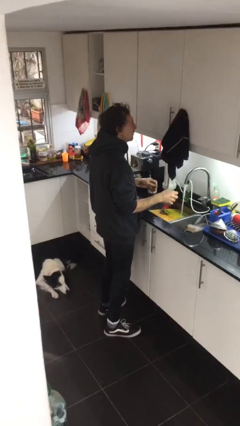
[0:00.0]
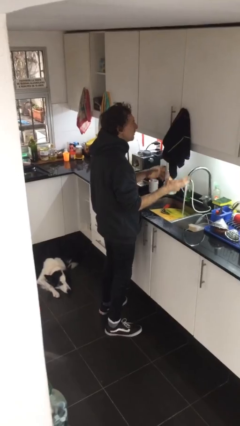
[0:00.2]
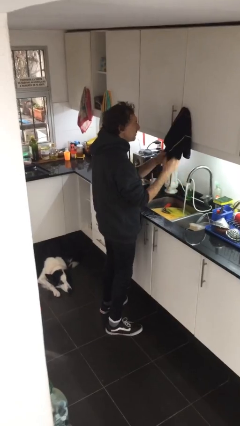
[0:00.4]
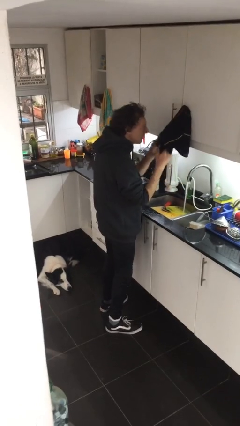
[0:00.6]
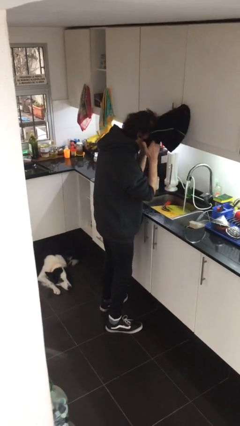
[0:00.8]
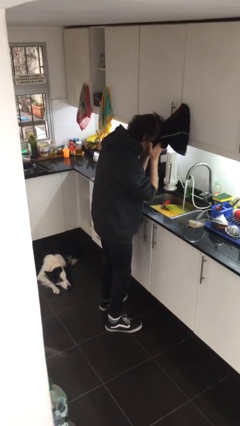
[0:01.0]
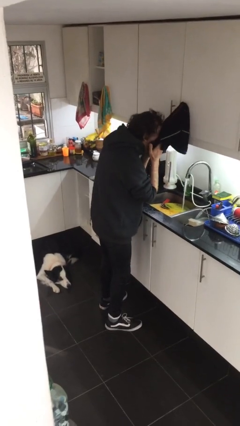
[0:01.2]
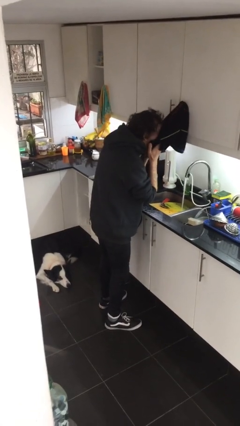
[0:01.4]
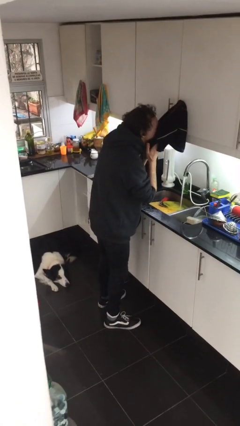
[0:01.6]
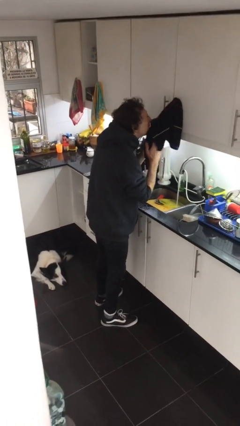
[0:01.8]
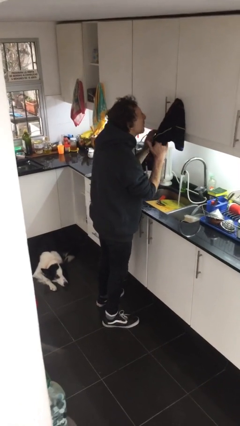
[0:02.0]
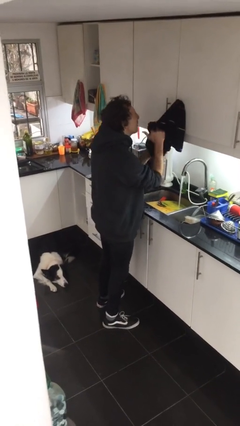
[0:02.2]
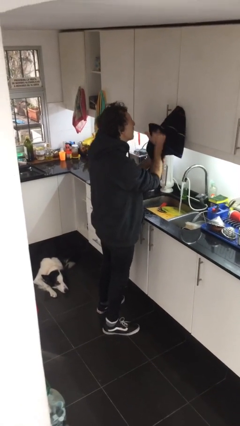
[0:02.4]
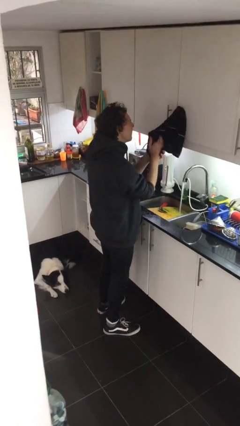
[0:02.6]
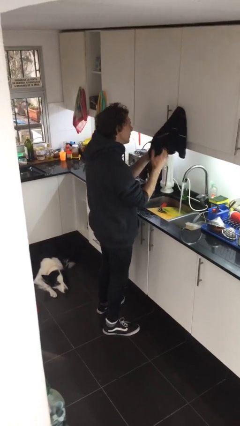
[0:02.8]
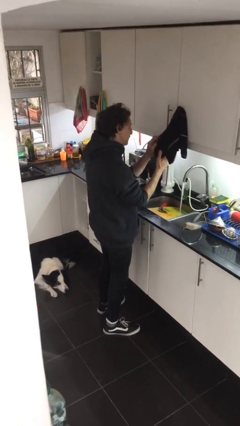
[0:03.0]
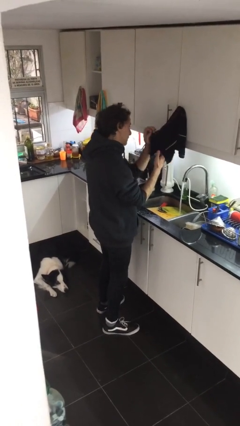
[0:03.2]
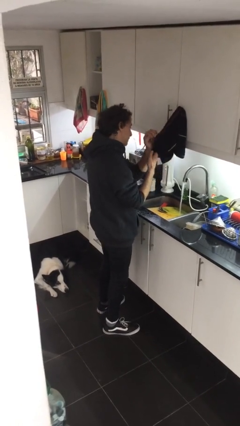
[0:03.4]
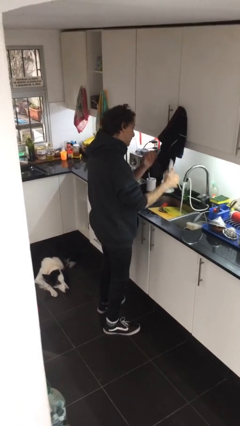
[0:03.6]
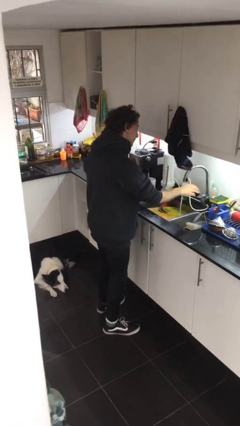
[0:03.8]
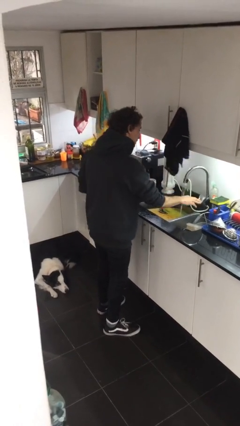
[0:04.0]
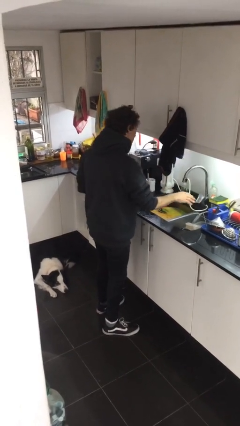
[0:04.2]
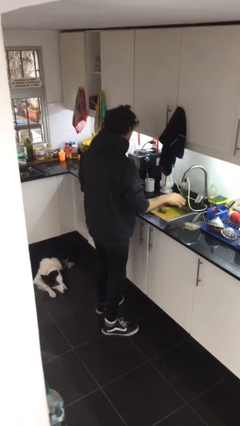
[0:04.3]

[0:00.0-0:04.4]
person dries face with towel

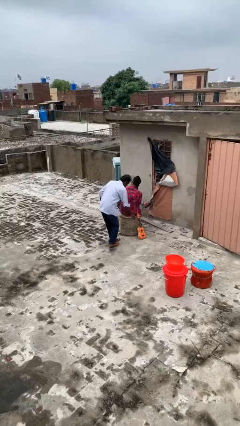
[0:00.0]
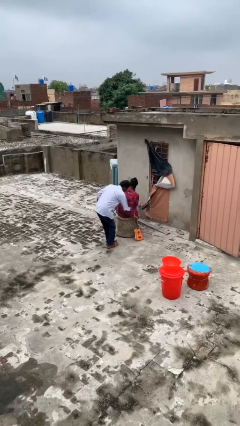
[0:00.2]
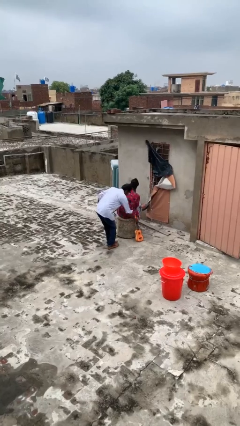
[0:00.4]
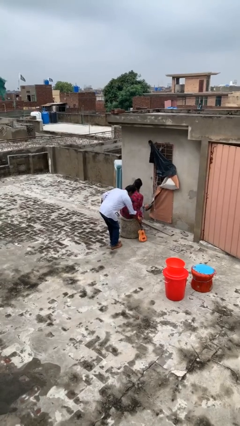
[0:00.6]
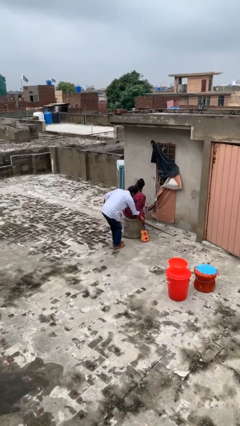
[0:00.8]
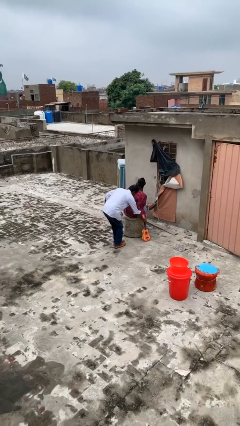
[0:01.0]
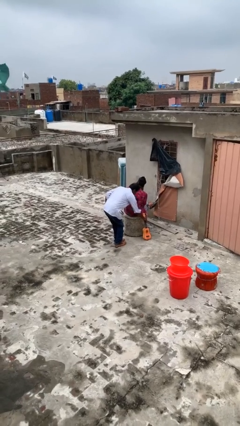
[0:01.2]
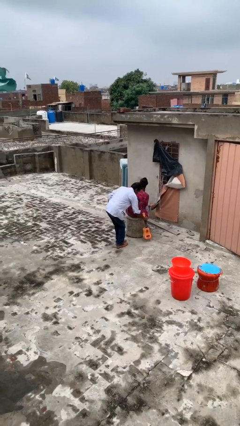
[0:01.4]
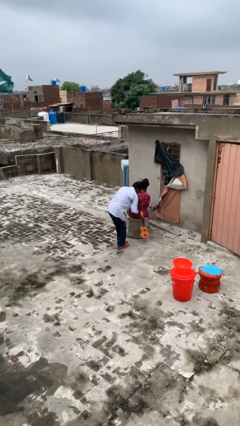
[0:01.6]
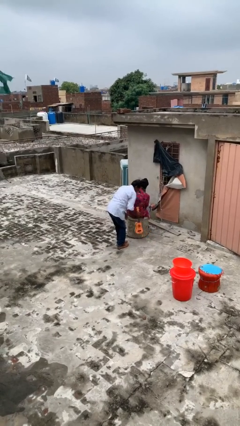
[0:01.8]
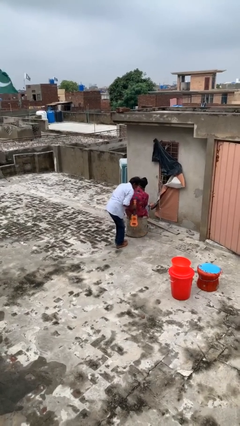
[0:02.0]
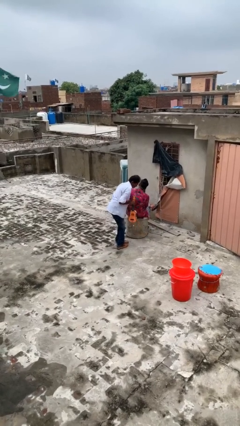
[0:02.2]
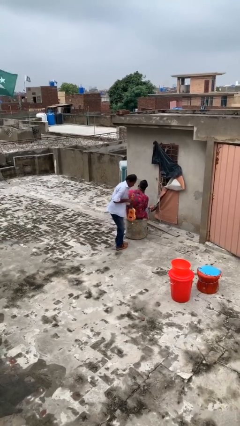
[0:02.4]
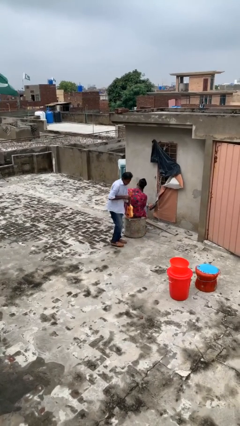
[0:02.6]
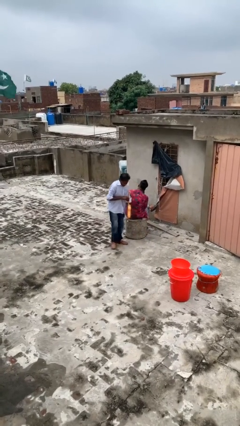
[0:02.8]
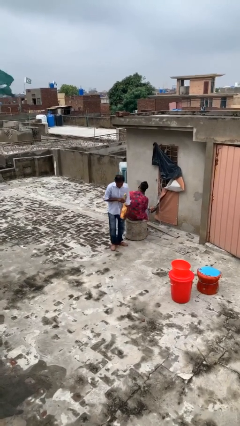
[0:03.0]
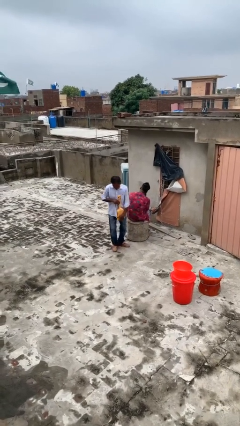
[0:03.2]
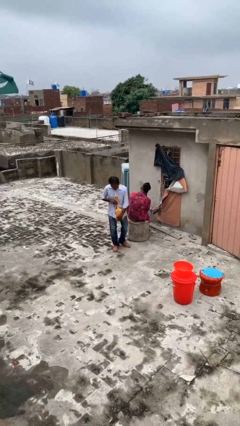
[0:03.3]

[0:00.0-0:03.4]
person steals object from person

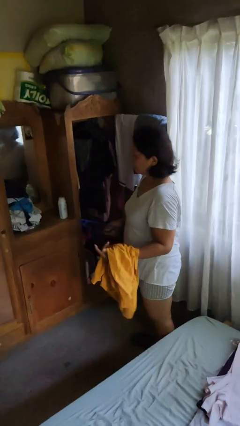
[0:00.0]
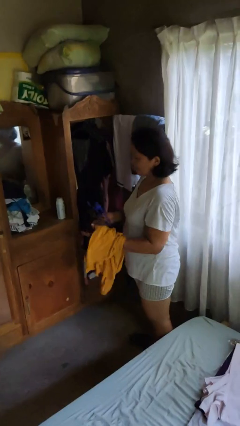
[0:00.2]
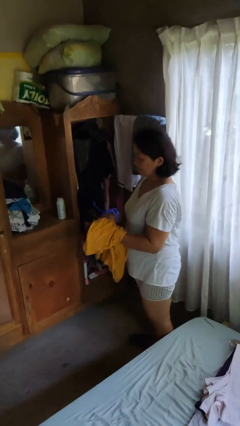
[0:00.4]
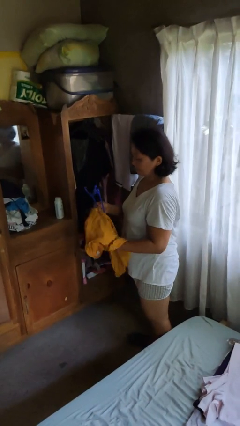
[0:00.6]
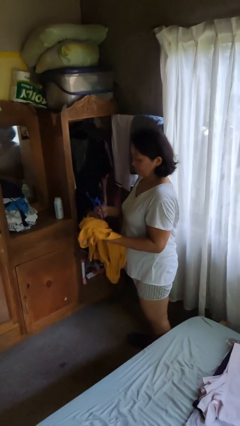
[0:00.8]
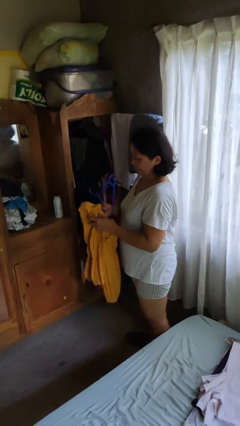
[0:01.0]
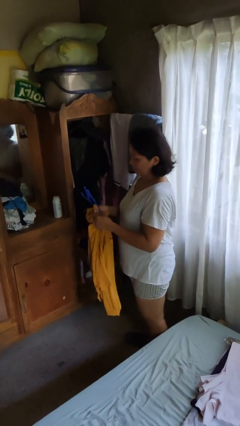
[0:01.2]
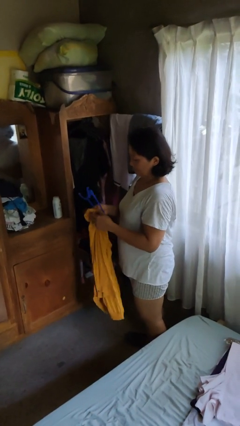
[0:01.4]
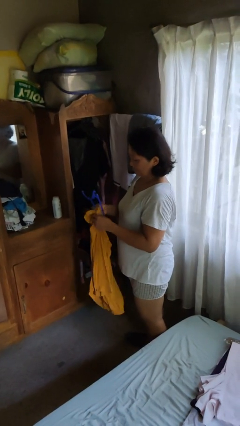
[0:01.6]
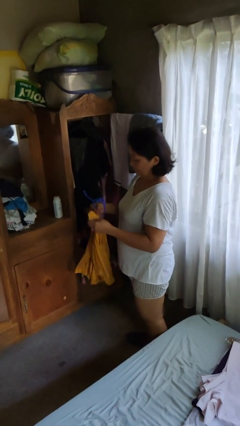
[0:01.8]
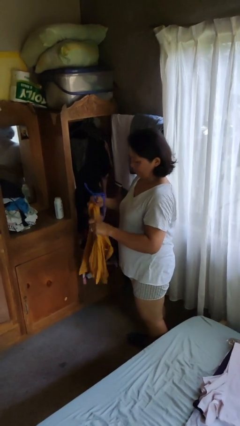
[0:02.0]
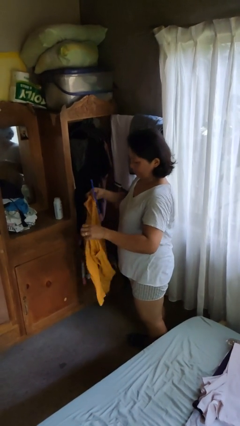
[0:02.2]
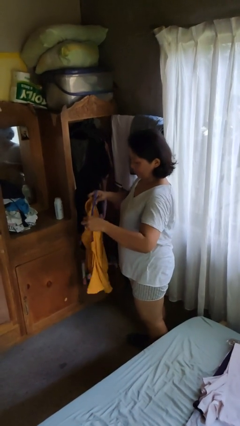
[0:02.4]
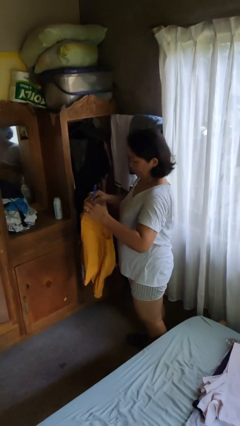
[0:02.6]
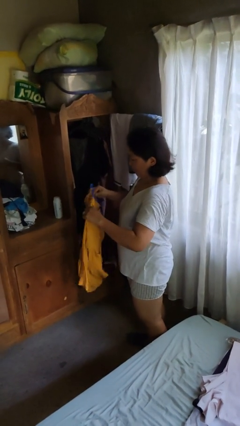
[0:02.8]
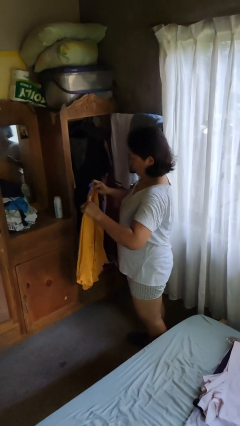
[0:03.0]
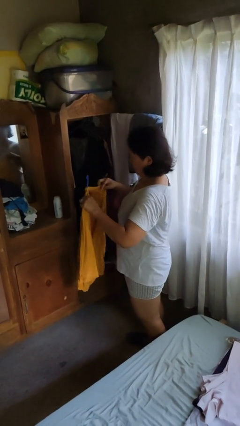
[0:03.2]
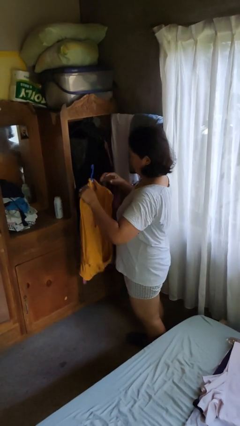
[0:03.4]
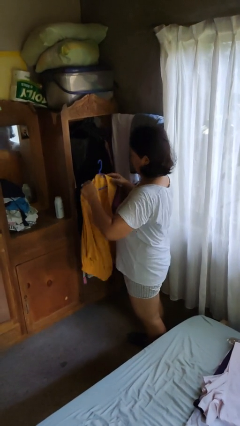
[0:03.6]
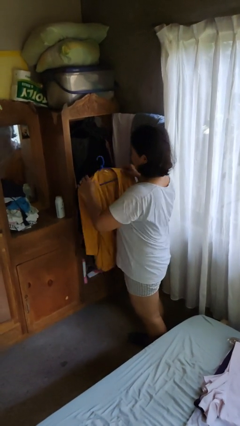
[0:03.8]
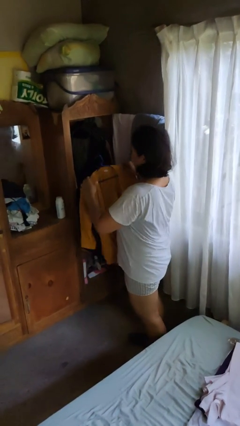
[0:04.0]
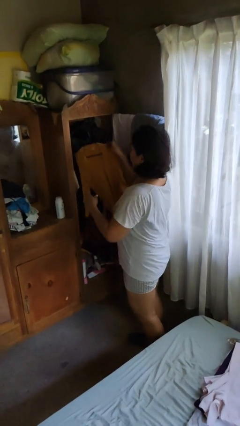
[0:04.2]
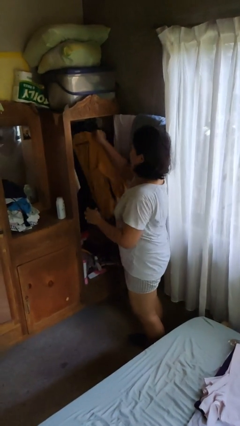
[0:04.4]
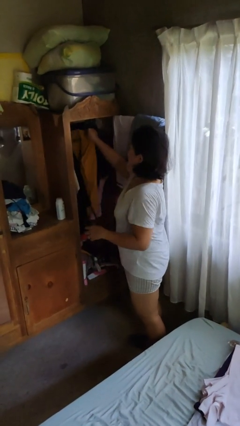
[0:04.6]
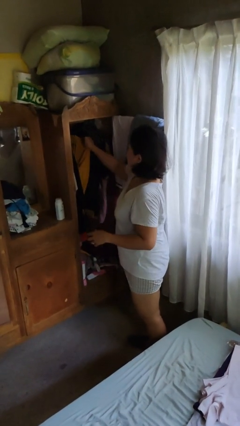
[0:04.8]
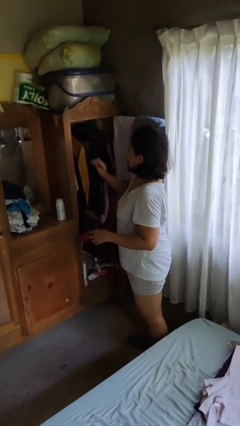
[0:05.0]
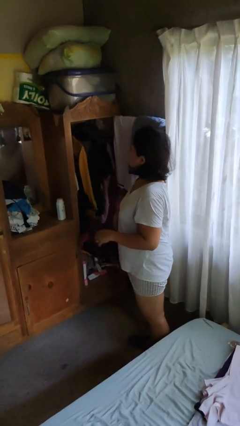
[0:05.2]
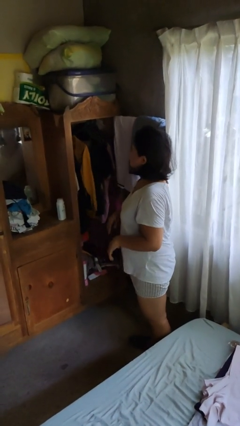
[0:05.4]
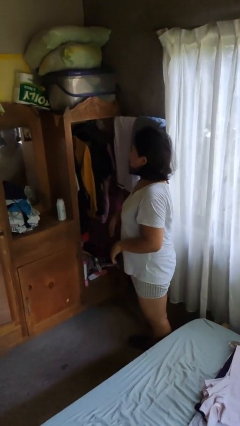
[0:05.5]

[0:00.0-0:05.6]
person puts clothes into closet

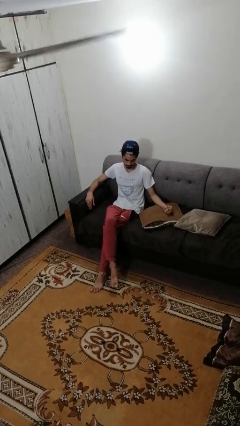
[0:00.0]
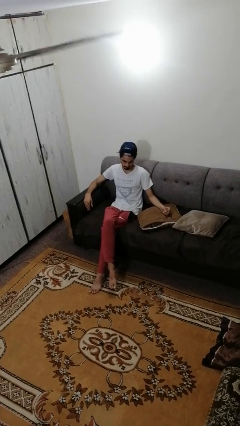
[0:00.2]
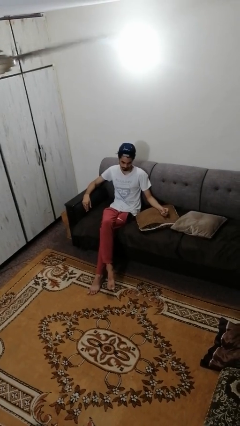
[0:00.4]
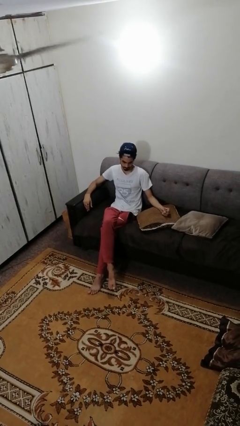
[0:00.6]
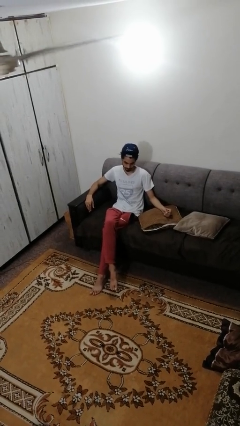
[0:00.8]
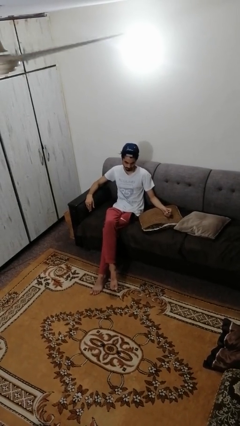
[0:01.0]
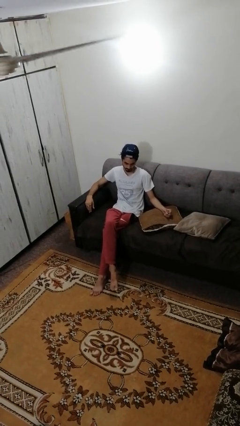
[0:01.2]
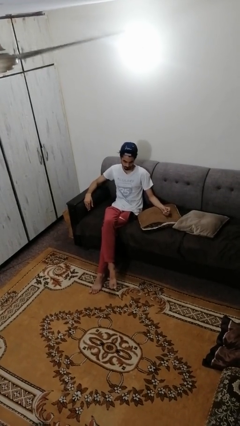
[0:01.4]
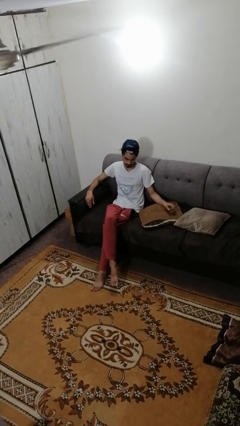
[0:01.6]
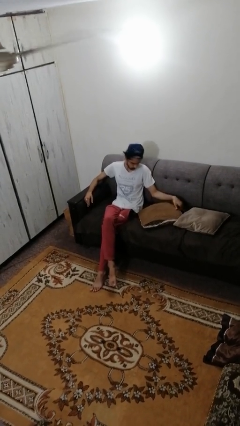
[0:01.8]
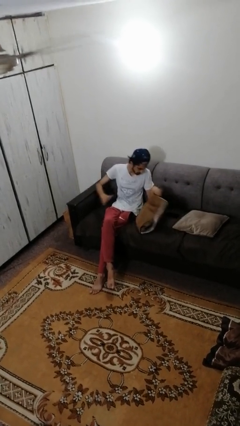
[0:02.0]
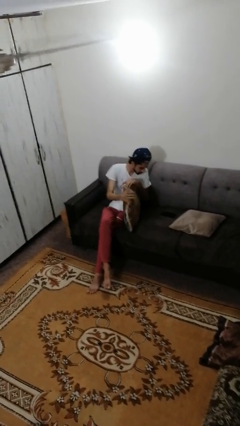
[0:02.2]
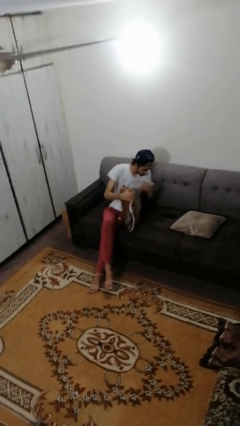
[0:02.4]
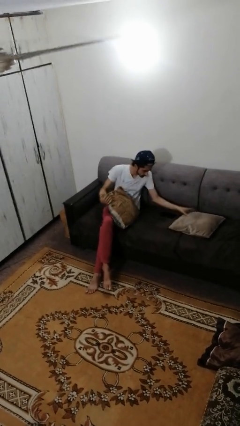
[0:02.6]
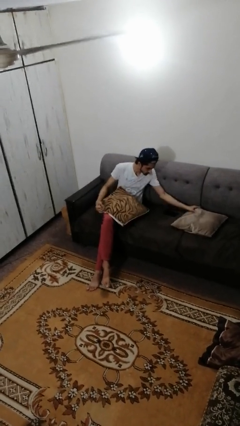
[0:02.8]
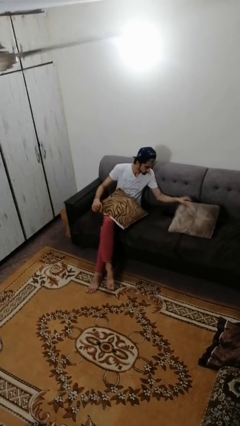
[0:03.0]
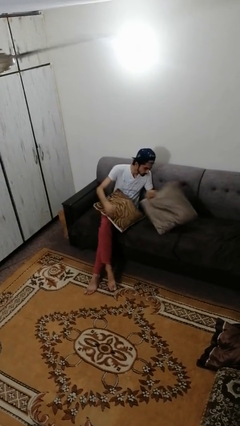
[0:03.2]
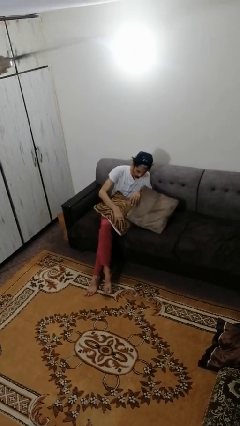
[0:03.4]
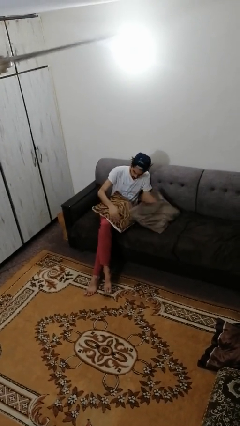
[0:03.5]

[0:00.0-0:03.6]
person searches in couch

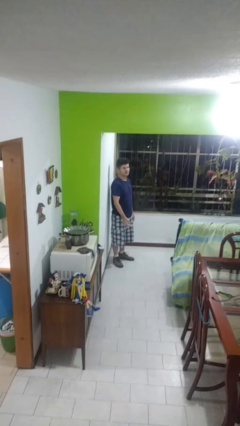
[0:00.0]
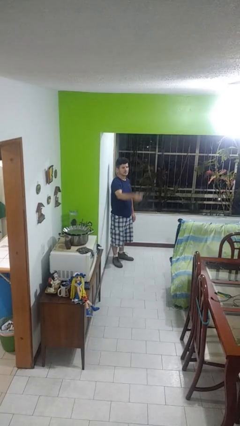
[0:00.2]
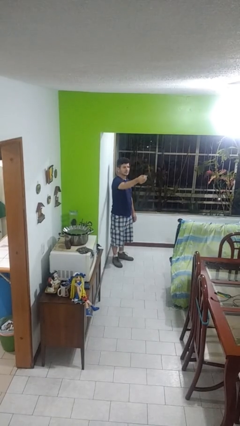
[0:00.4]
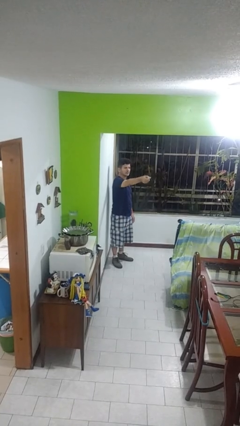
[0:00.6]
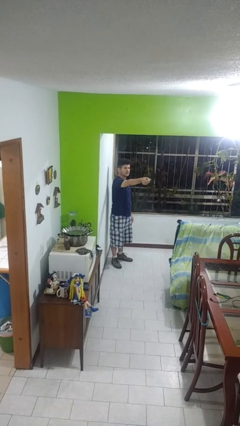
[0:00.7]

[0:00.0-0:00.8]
person uses television remote
